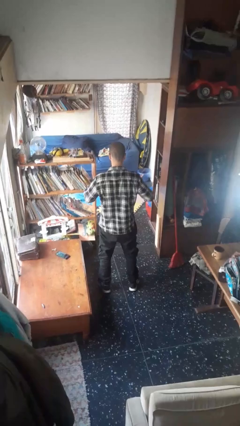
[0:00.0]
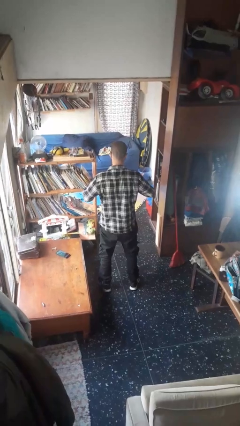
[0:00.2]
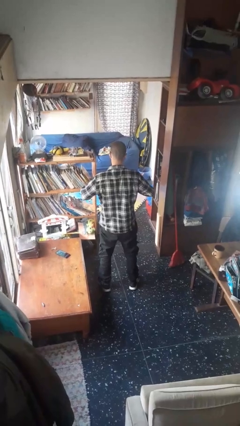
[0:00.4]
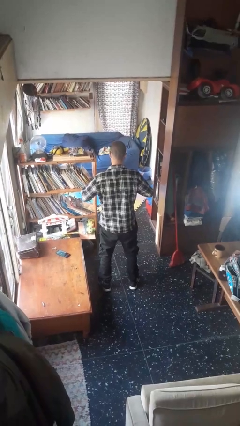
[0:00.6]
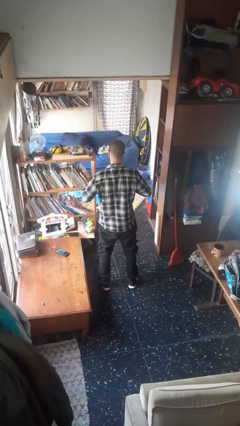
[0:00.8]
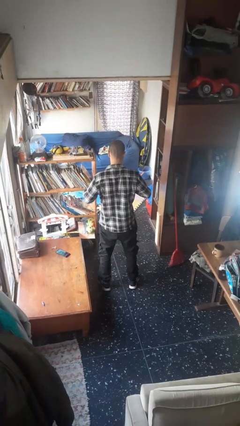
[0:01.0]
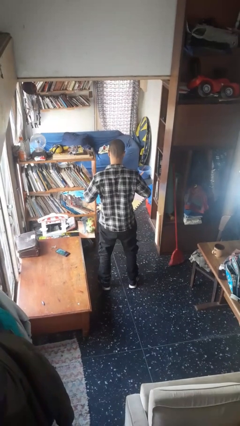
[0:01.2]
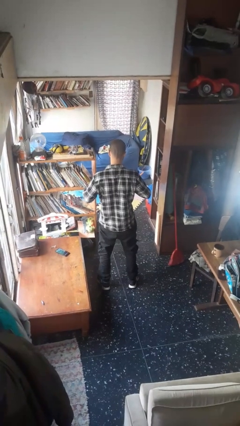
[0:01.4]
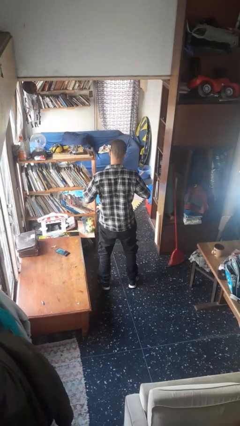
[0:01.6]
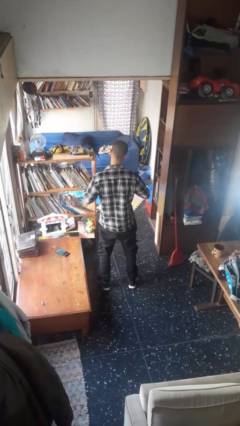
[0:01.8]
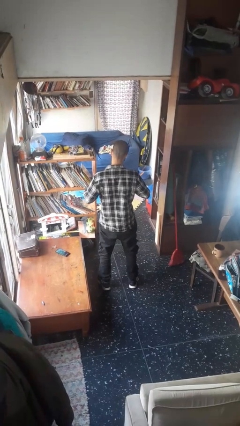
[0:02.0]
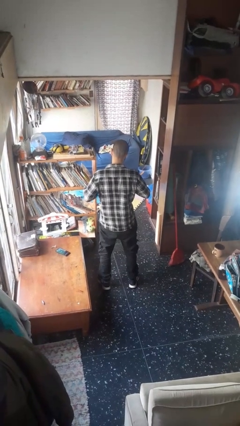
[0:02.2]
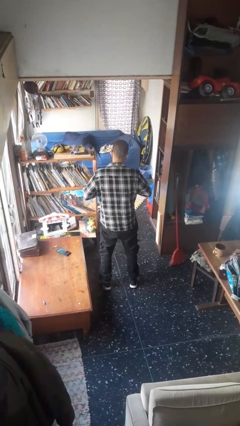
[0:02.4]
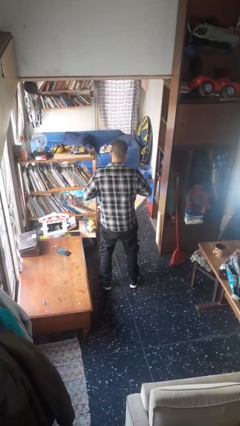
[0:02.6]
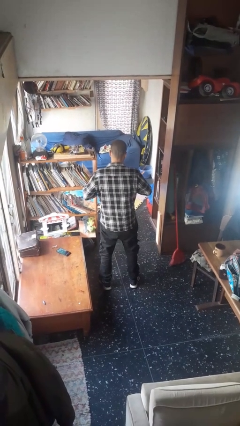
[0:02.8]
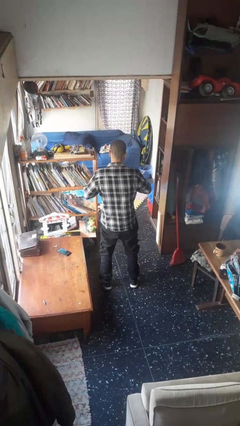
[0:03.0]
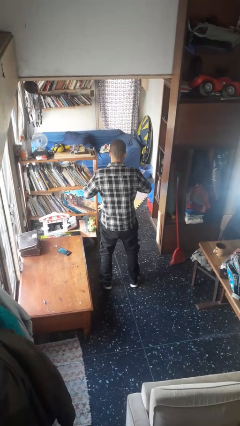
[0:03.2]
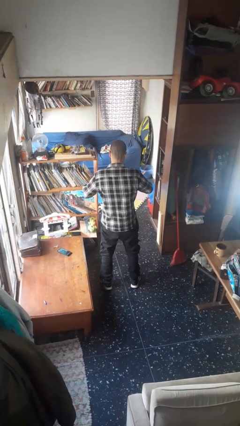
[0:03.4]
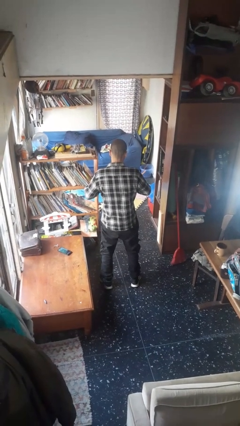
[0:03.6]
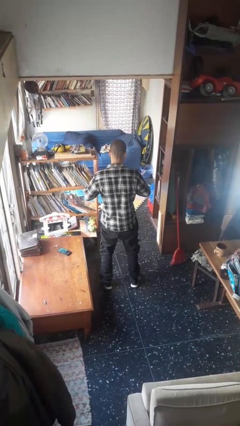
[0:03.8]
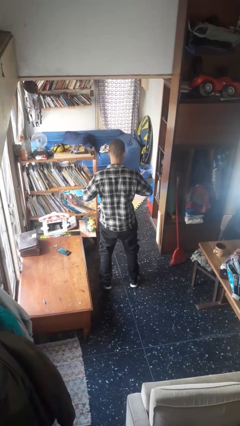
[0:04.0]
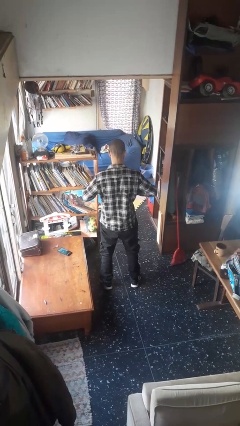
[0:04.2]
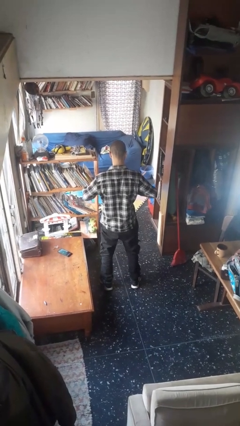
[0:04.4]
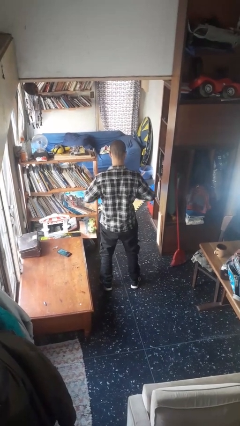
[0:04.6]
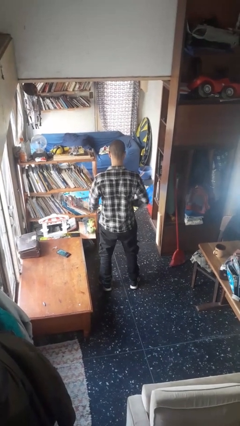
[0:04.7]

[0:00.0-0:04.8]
person buttons shirt

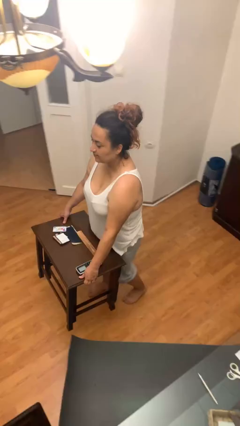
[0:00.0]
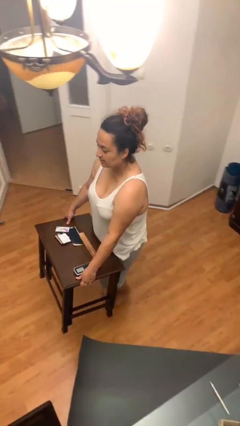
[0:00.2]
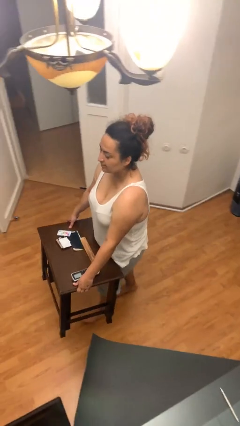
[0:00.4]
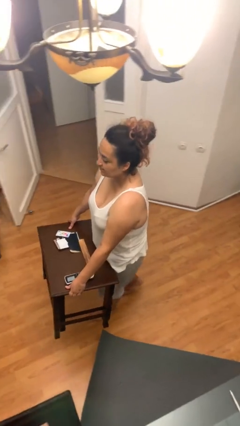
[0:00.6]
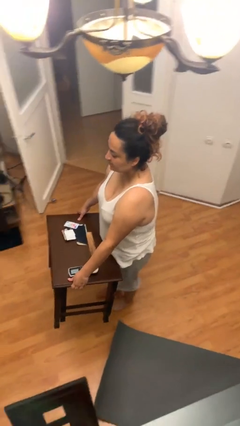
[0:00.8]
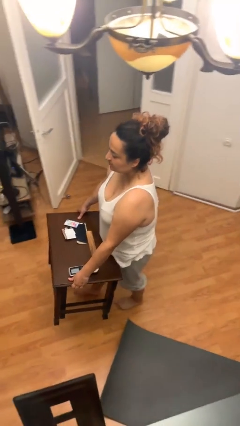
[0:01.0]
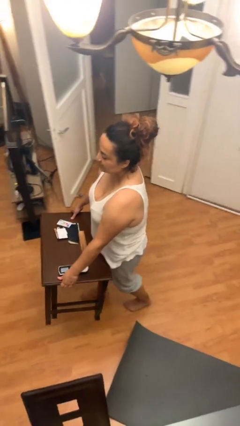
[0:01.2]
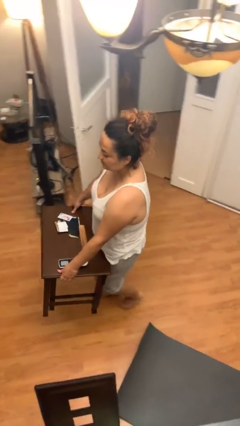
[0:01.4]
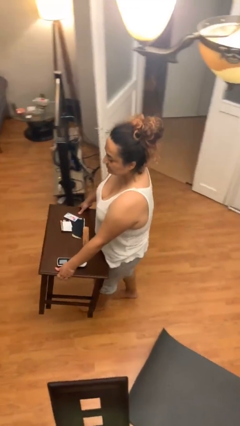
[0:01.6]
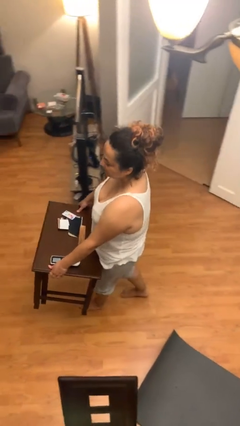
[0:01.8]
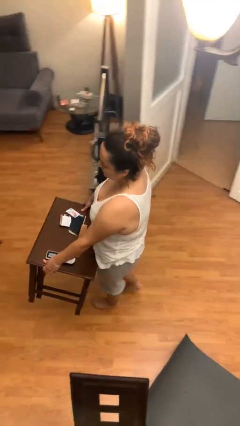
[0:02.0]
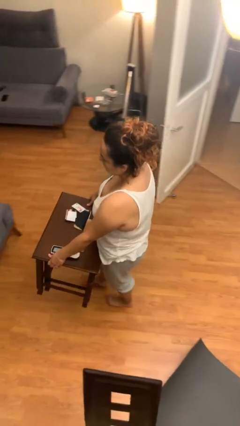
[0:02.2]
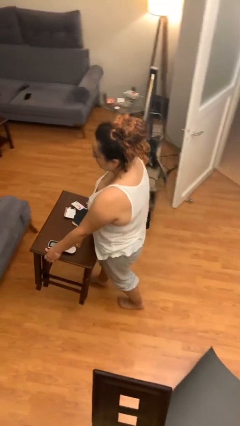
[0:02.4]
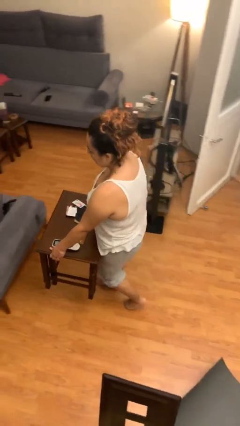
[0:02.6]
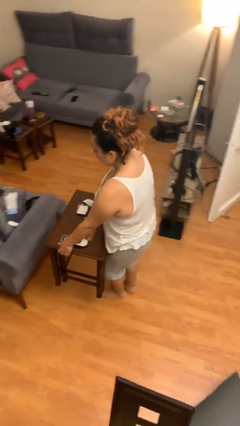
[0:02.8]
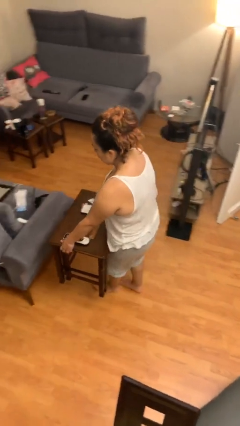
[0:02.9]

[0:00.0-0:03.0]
person carries heavy object

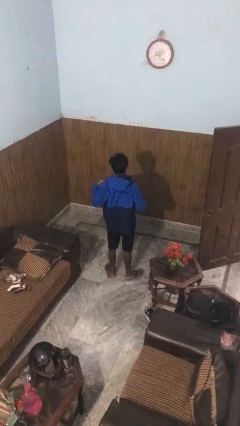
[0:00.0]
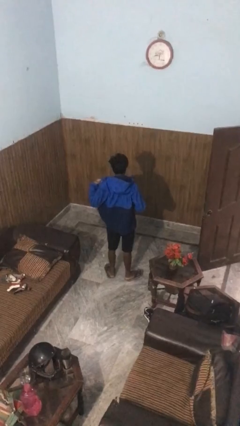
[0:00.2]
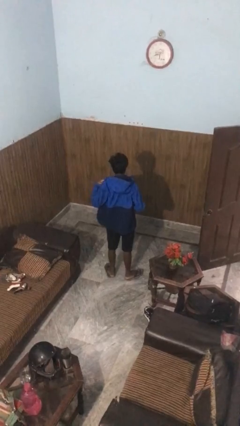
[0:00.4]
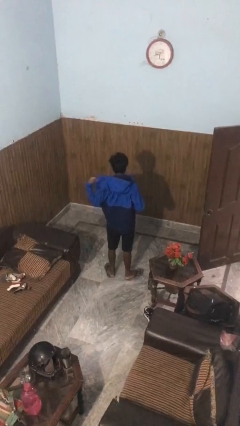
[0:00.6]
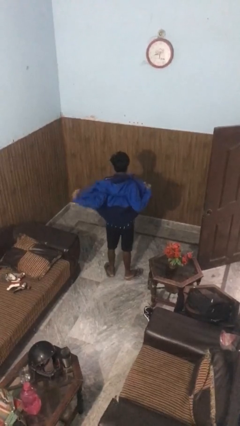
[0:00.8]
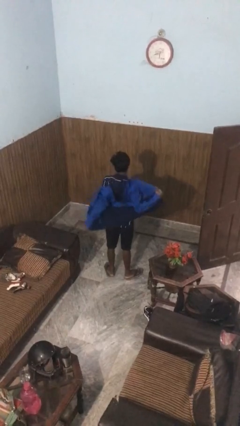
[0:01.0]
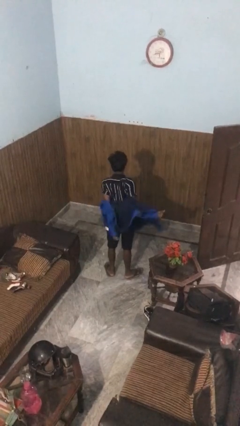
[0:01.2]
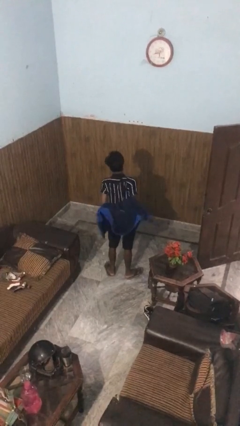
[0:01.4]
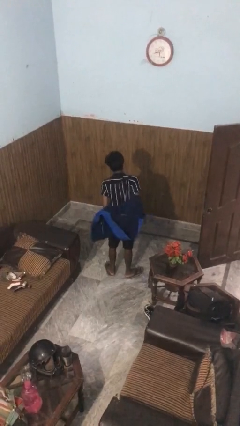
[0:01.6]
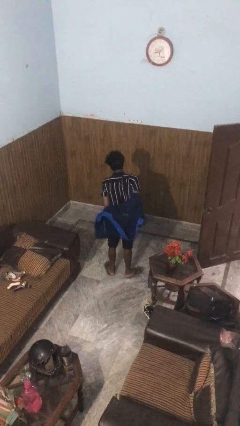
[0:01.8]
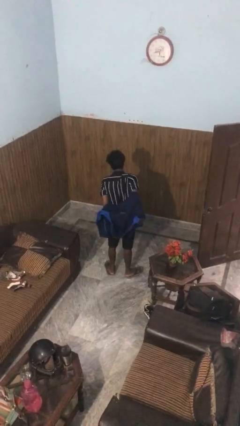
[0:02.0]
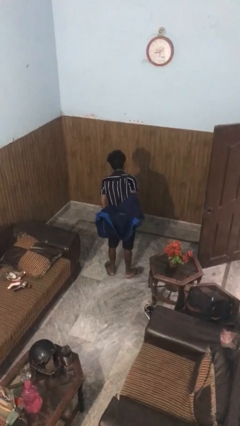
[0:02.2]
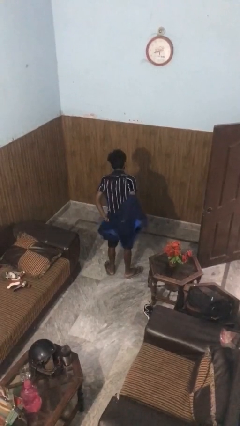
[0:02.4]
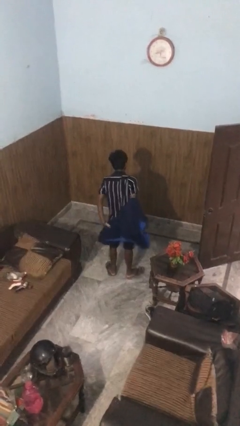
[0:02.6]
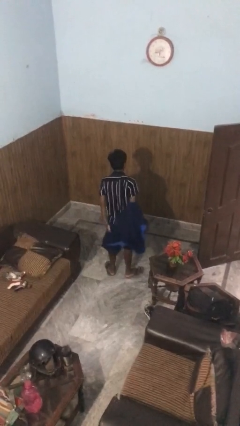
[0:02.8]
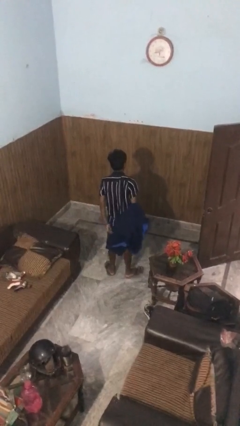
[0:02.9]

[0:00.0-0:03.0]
person takes off jacket

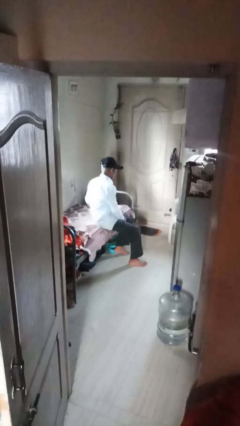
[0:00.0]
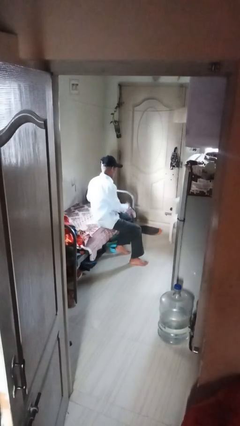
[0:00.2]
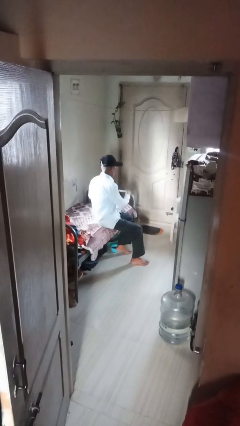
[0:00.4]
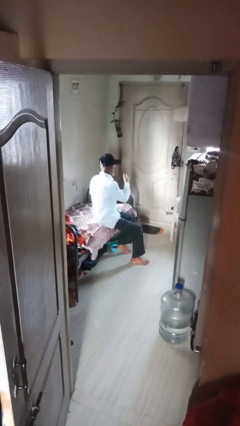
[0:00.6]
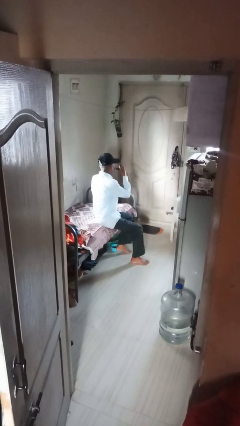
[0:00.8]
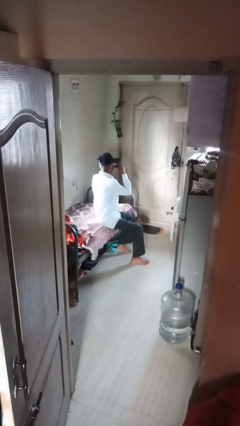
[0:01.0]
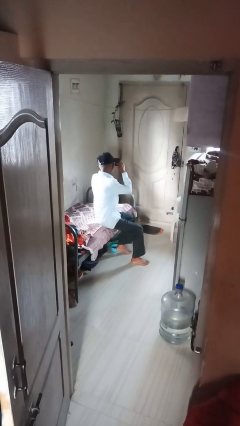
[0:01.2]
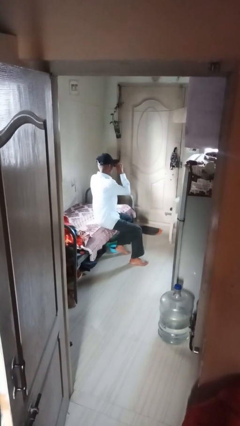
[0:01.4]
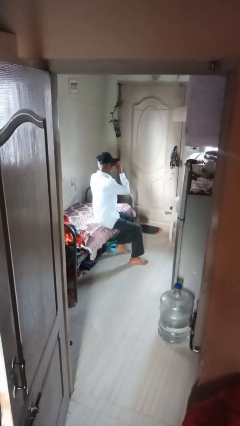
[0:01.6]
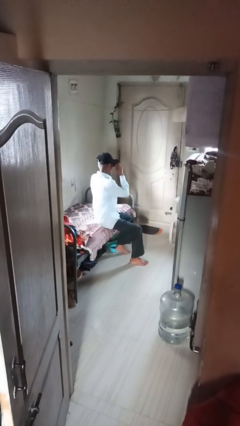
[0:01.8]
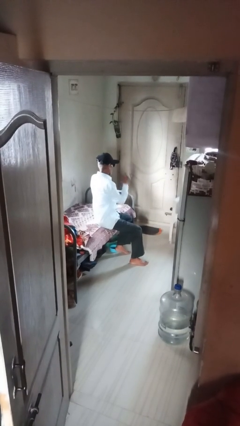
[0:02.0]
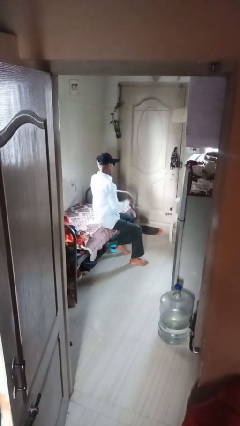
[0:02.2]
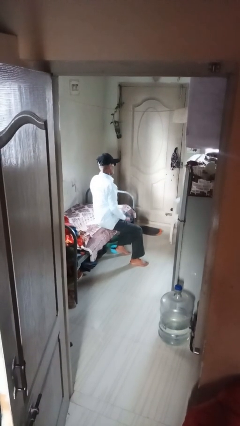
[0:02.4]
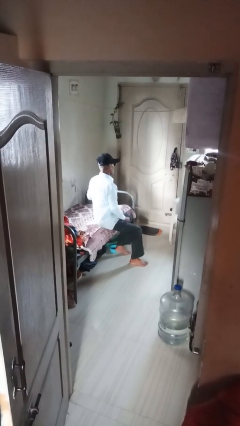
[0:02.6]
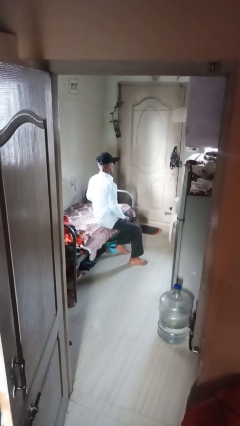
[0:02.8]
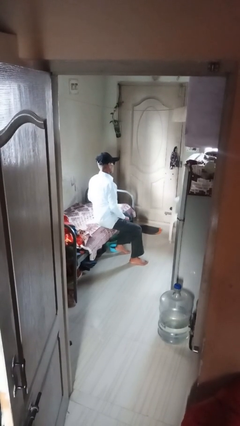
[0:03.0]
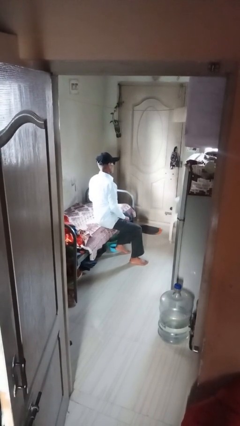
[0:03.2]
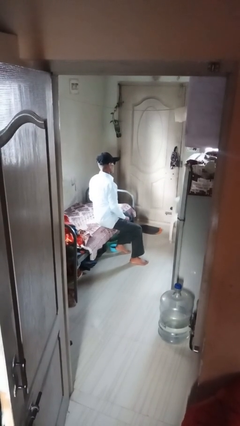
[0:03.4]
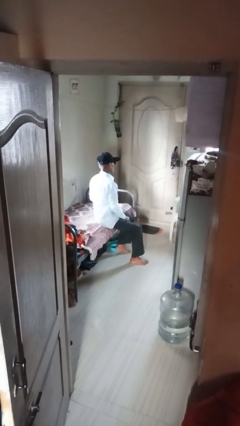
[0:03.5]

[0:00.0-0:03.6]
person puts on sunglasses

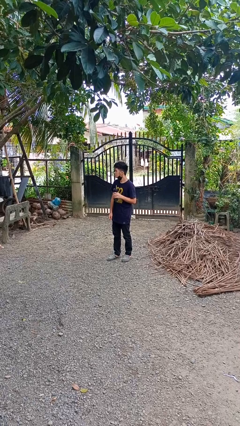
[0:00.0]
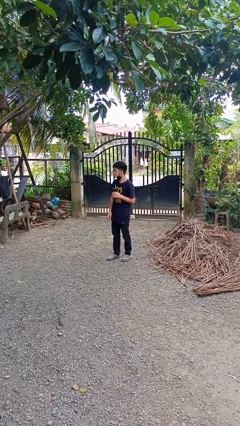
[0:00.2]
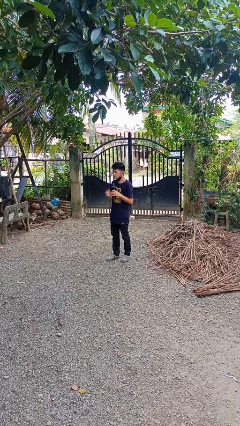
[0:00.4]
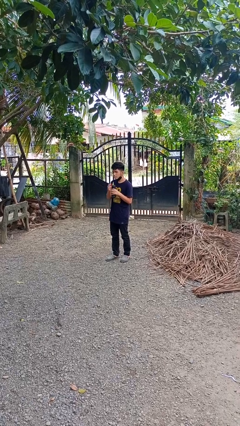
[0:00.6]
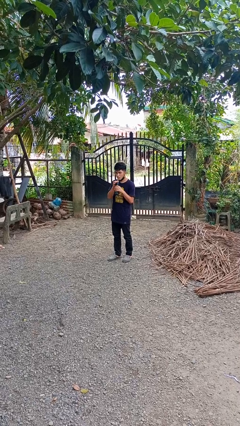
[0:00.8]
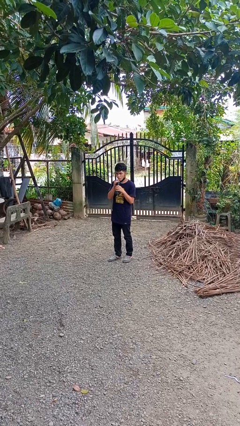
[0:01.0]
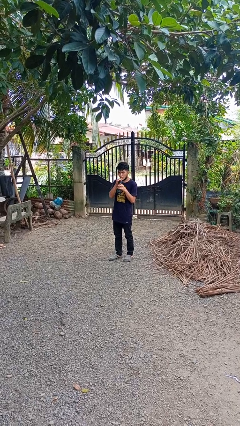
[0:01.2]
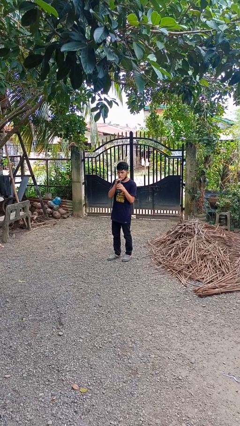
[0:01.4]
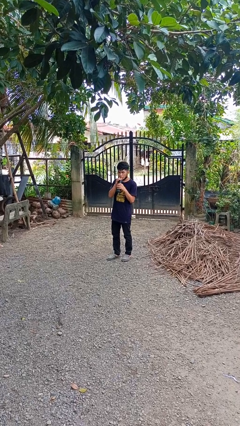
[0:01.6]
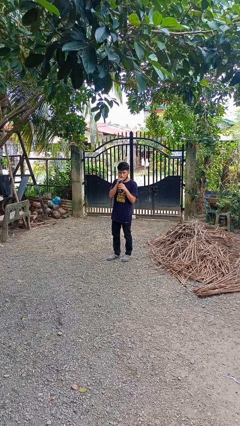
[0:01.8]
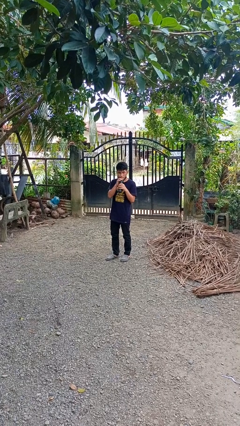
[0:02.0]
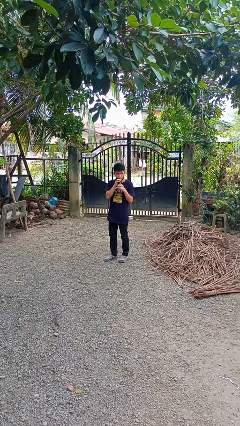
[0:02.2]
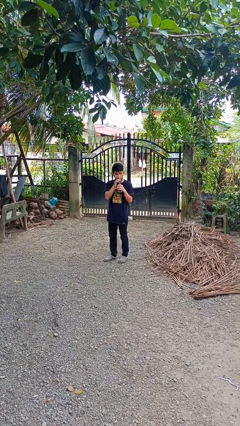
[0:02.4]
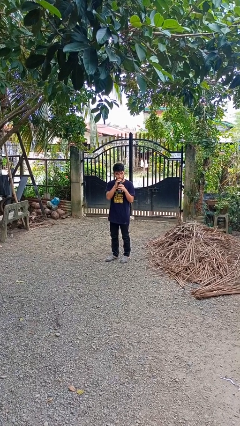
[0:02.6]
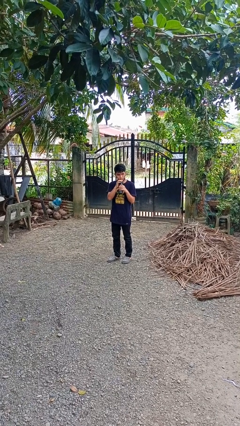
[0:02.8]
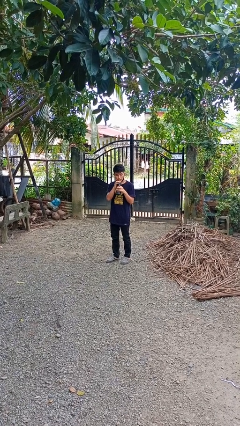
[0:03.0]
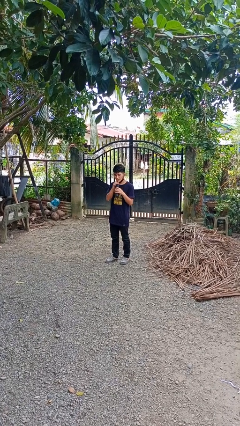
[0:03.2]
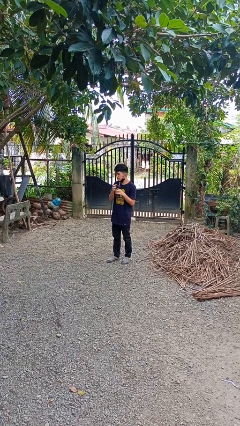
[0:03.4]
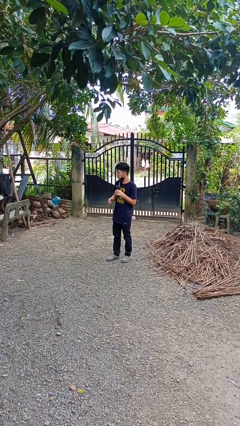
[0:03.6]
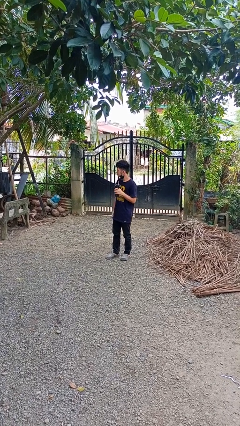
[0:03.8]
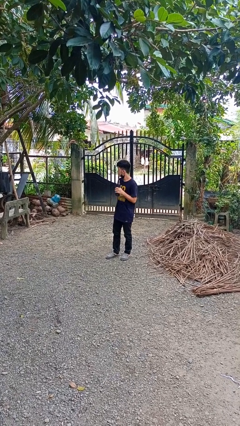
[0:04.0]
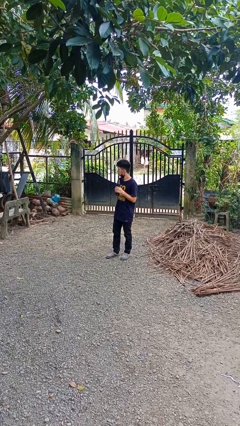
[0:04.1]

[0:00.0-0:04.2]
person drinks from straw
